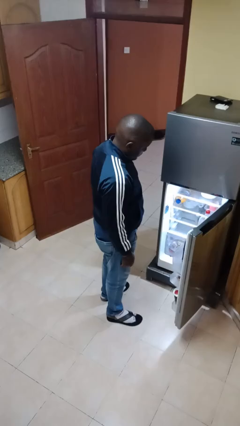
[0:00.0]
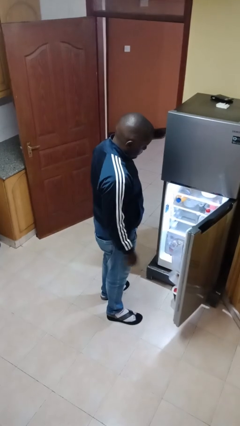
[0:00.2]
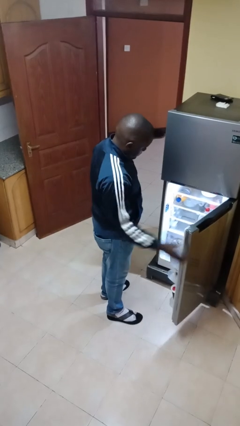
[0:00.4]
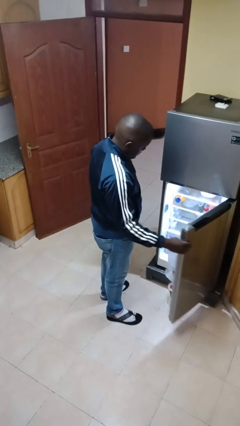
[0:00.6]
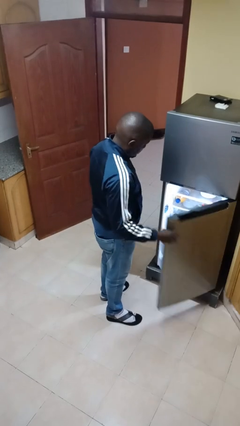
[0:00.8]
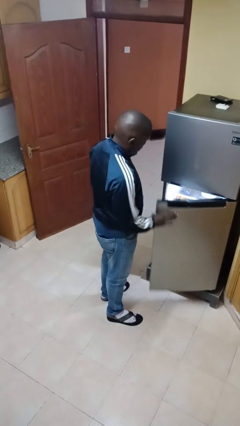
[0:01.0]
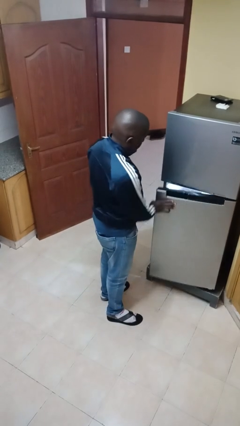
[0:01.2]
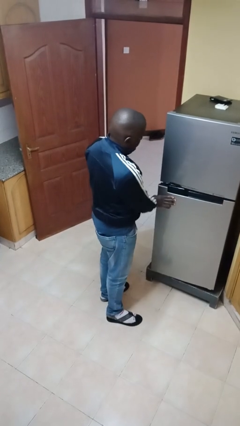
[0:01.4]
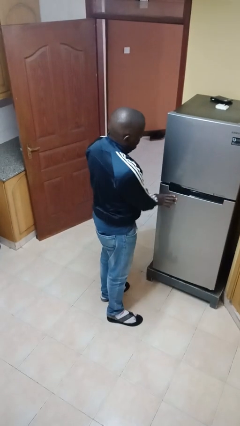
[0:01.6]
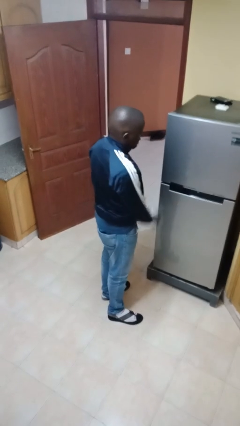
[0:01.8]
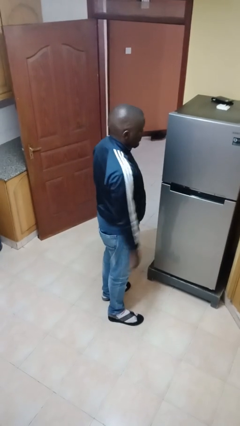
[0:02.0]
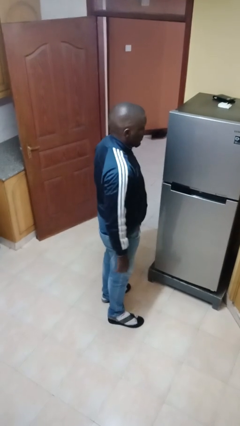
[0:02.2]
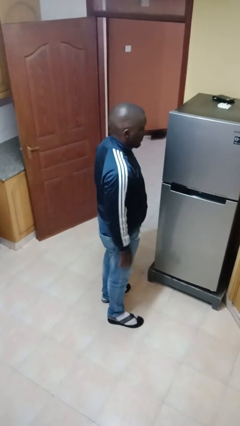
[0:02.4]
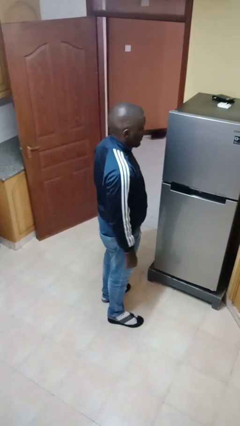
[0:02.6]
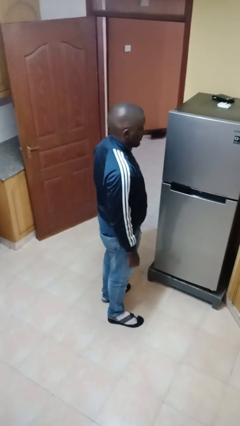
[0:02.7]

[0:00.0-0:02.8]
person closes refrigerator

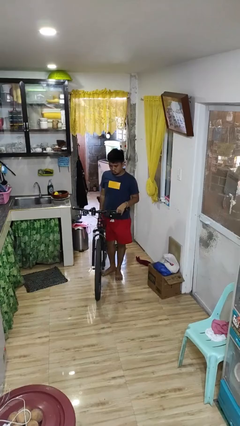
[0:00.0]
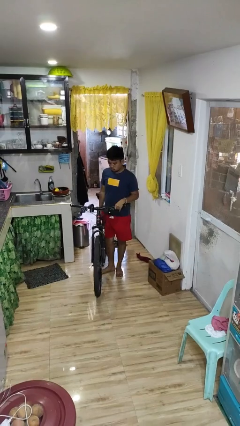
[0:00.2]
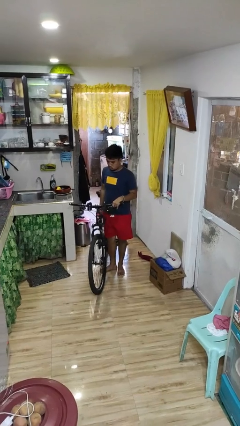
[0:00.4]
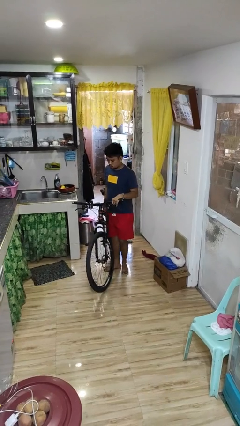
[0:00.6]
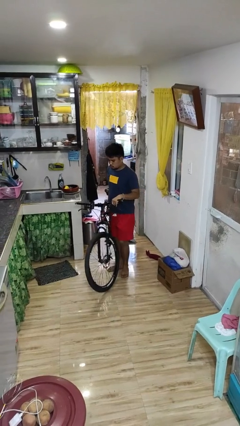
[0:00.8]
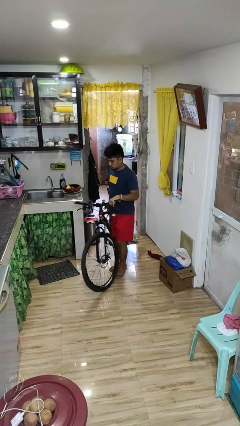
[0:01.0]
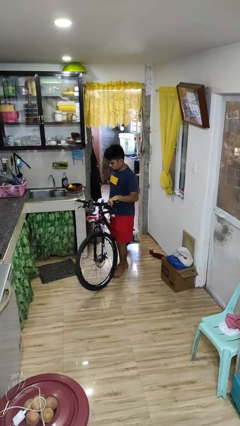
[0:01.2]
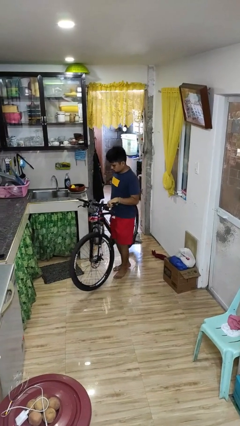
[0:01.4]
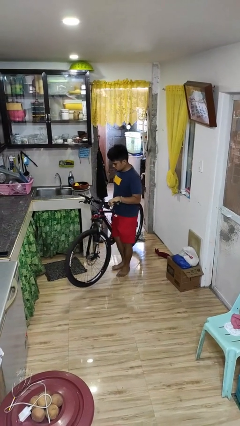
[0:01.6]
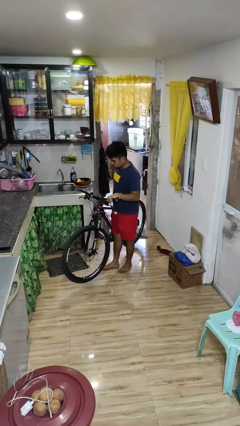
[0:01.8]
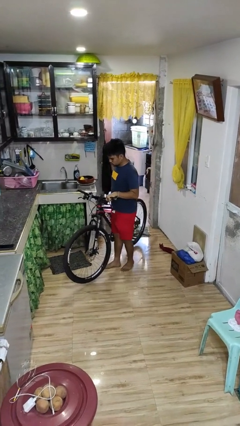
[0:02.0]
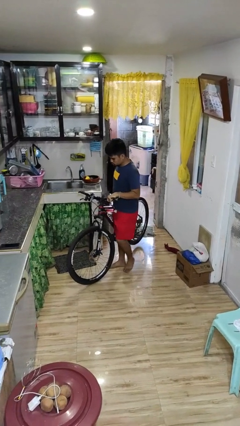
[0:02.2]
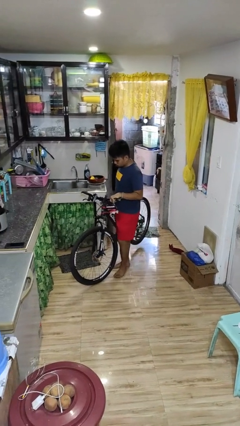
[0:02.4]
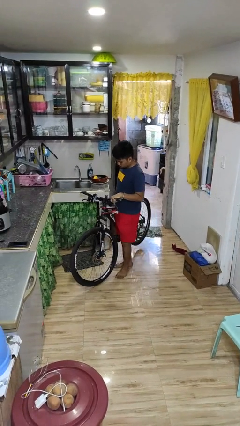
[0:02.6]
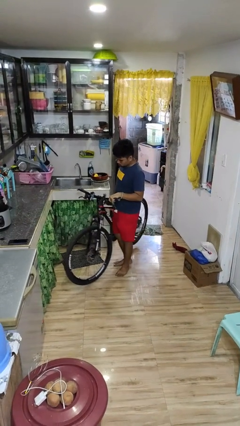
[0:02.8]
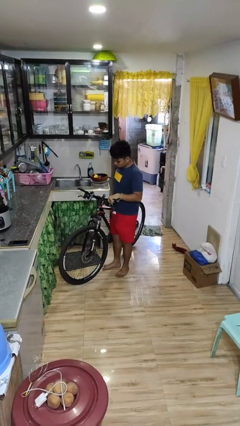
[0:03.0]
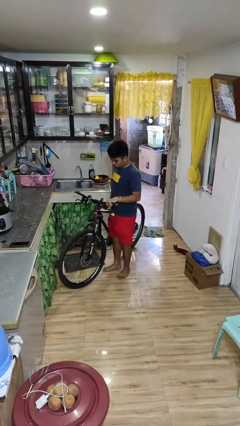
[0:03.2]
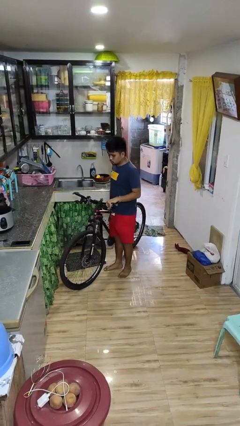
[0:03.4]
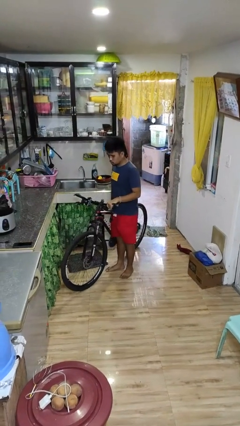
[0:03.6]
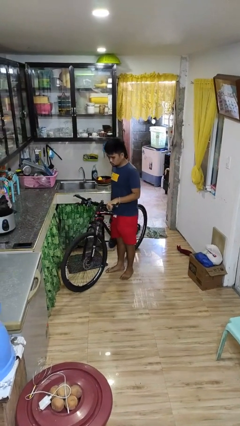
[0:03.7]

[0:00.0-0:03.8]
person carries bicycle

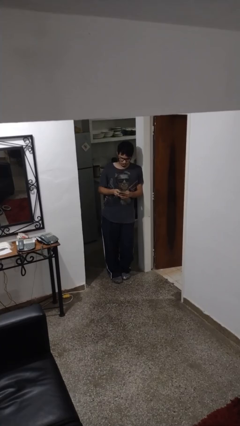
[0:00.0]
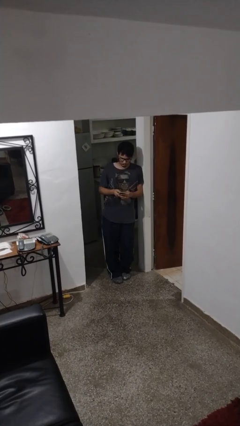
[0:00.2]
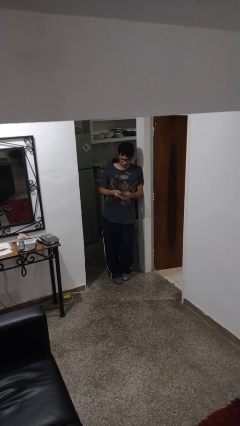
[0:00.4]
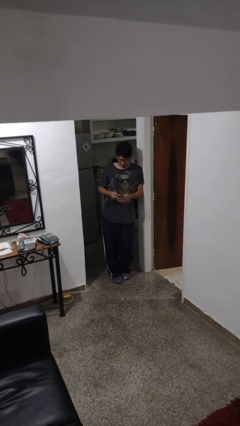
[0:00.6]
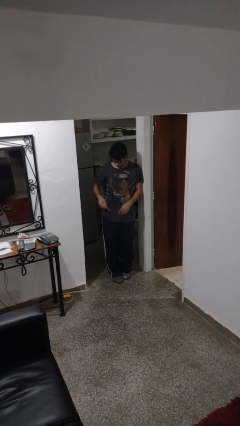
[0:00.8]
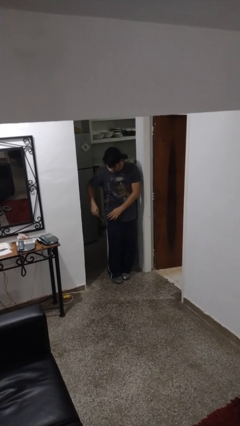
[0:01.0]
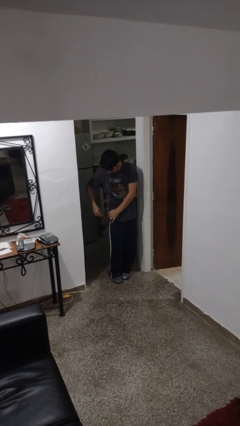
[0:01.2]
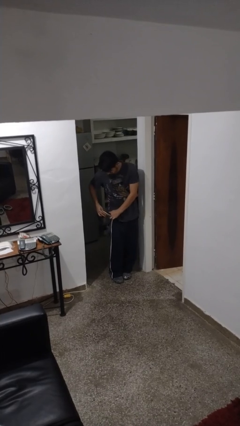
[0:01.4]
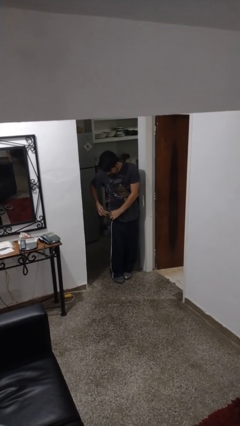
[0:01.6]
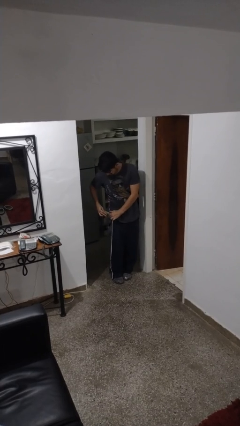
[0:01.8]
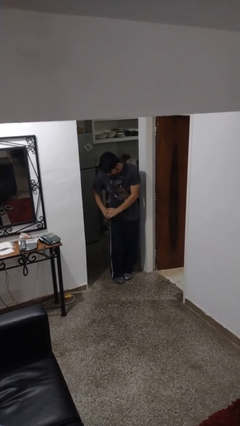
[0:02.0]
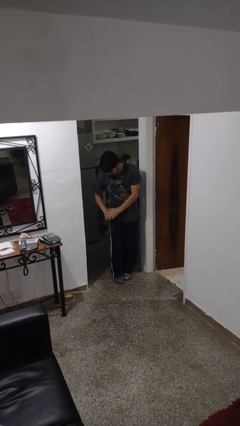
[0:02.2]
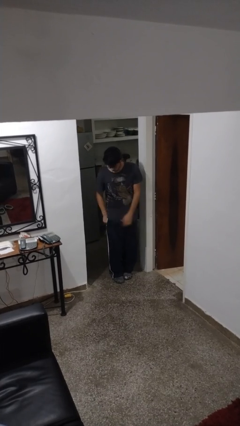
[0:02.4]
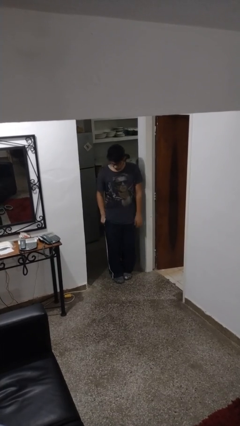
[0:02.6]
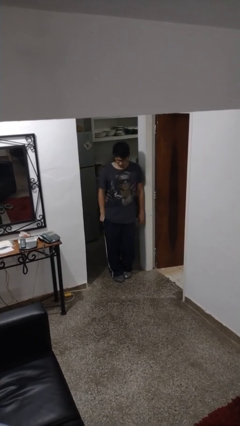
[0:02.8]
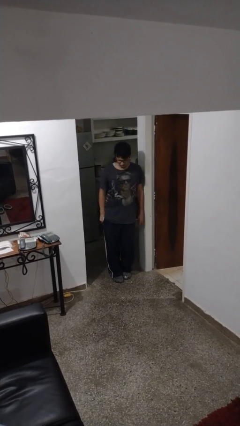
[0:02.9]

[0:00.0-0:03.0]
person puts phone into pocket

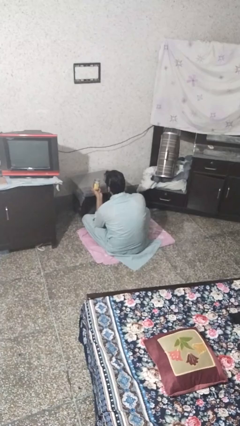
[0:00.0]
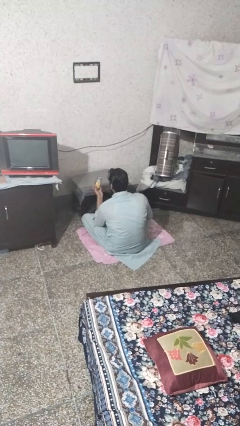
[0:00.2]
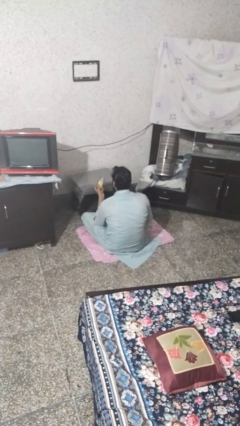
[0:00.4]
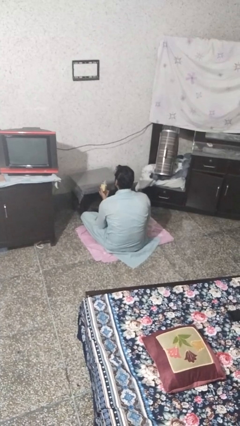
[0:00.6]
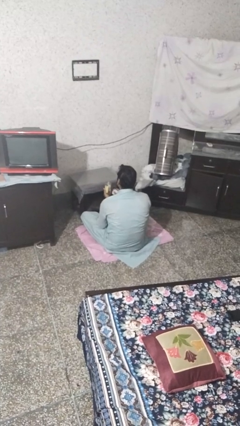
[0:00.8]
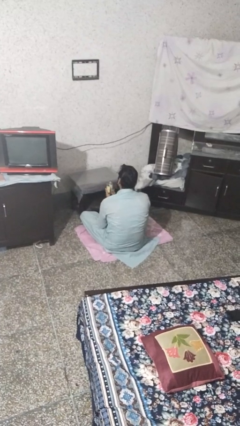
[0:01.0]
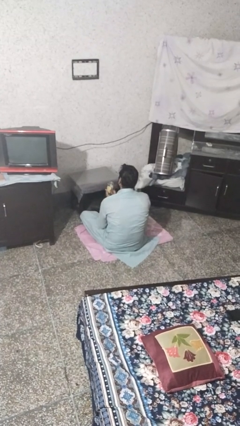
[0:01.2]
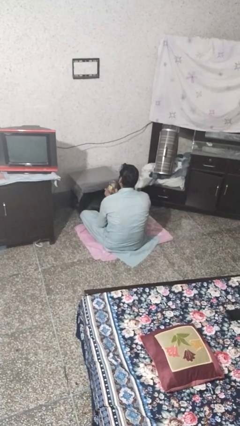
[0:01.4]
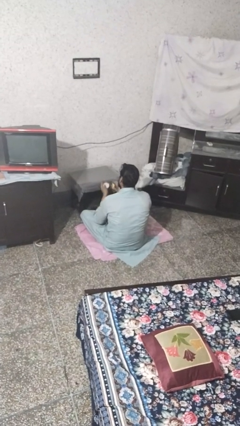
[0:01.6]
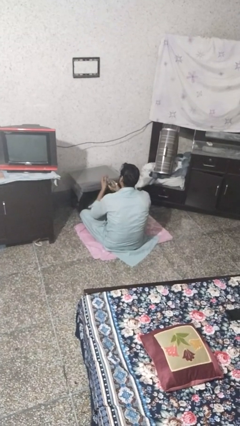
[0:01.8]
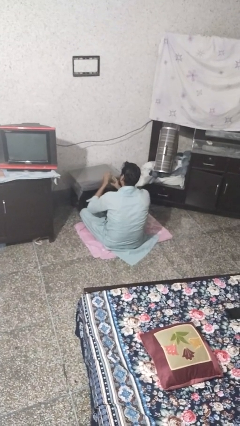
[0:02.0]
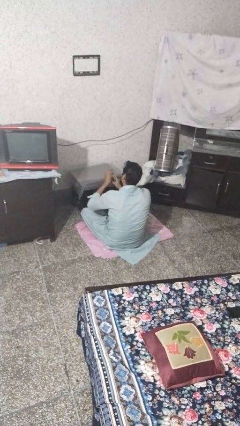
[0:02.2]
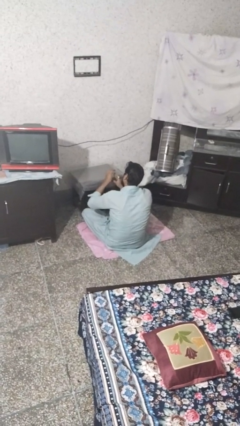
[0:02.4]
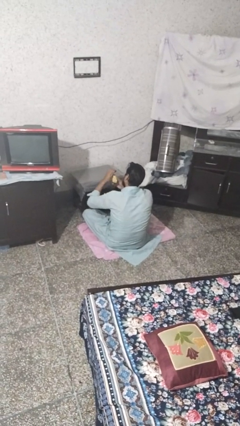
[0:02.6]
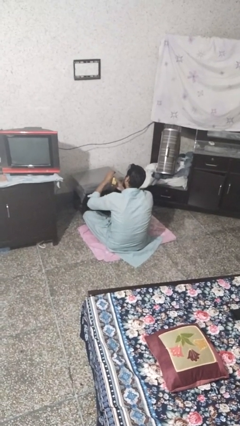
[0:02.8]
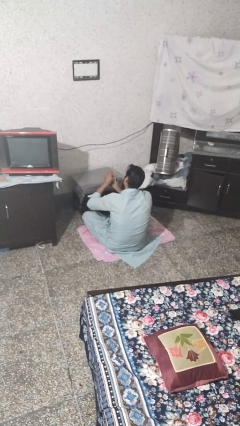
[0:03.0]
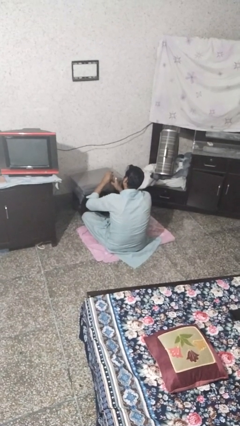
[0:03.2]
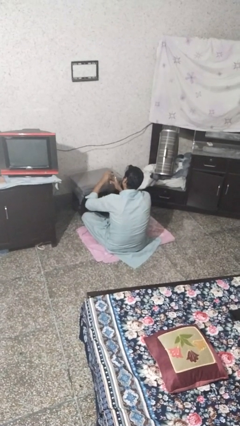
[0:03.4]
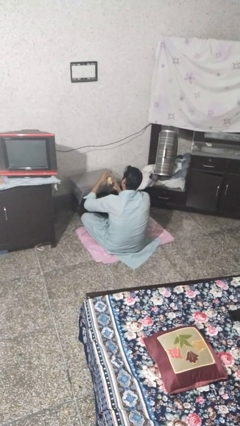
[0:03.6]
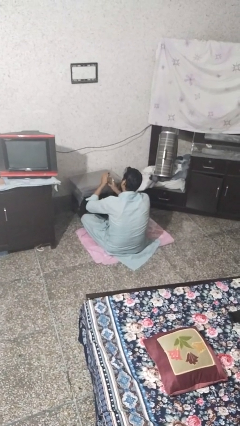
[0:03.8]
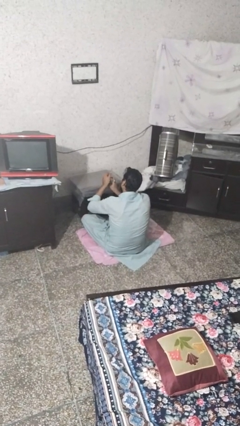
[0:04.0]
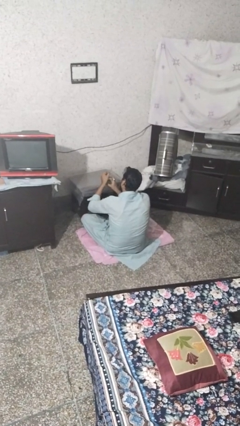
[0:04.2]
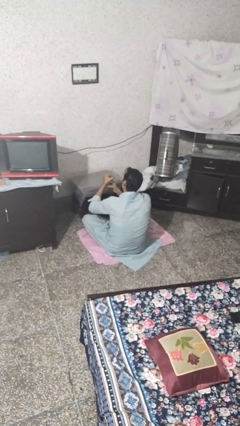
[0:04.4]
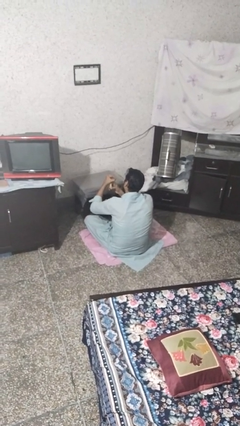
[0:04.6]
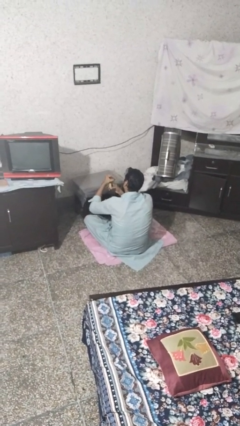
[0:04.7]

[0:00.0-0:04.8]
person closes jar

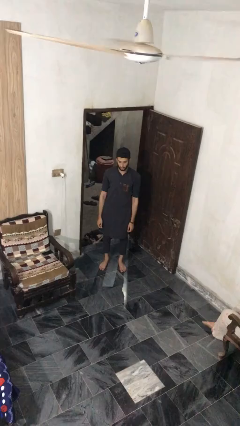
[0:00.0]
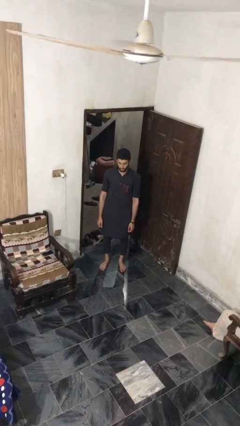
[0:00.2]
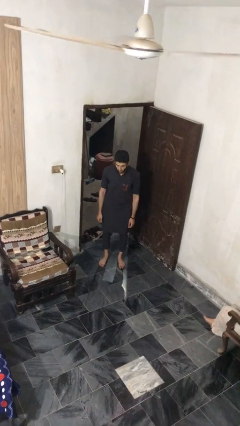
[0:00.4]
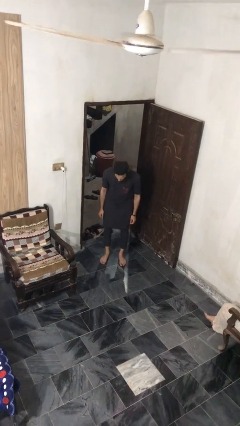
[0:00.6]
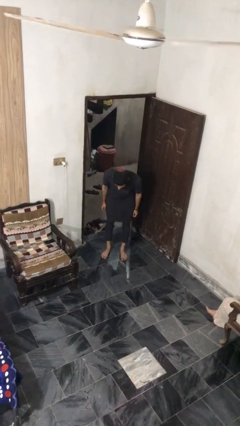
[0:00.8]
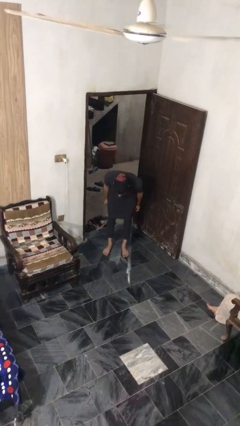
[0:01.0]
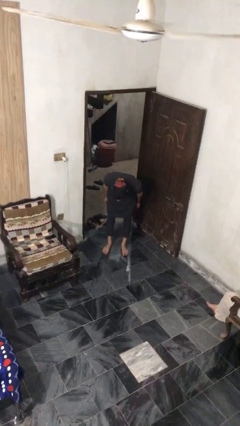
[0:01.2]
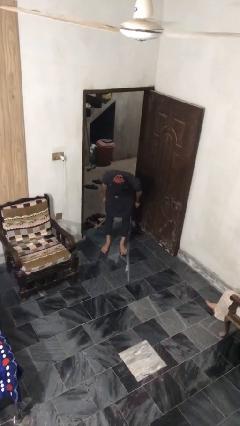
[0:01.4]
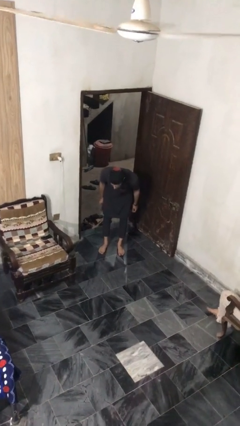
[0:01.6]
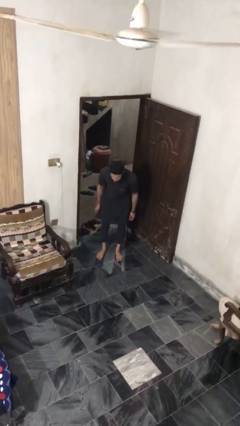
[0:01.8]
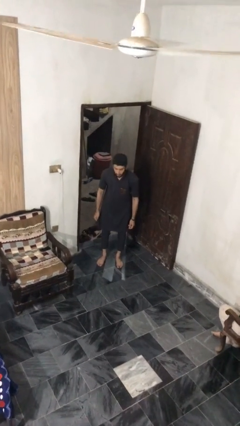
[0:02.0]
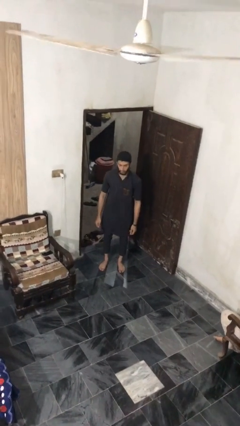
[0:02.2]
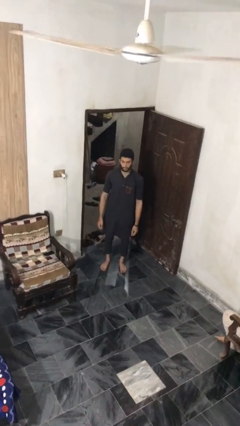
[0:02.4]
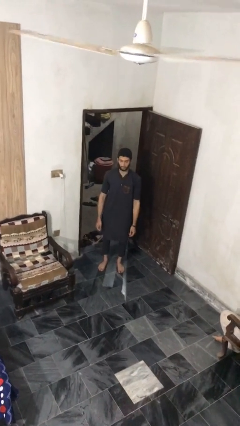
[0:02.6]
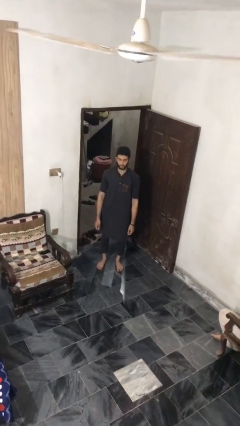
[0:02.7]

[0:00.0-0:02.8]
person bows

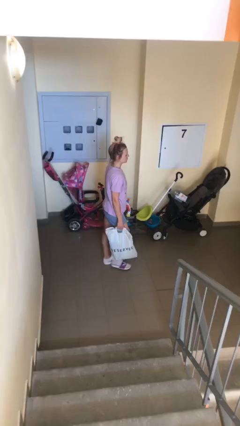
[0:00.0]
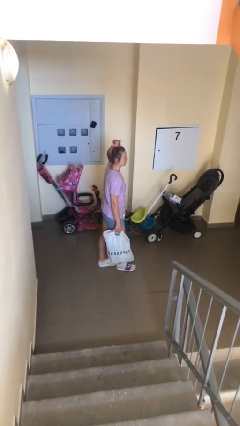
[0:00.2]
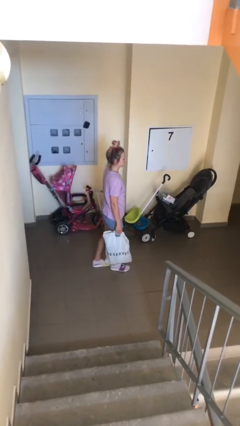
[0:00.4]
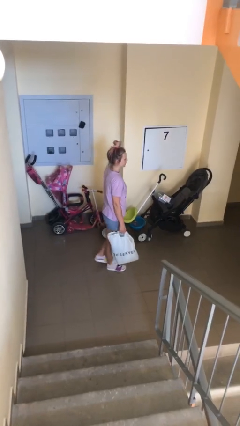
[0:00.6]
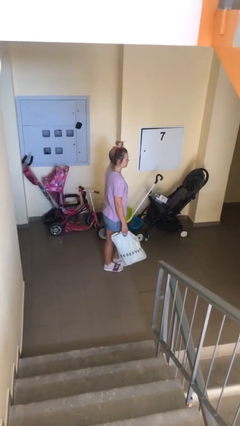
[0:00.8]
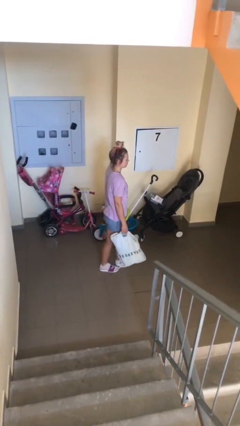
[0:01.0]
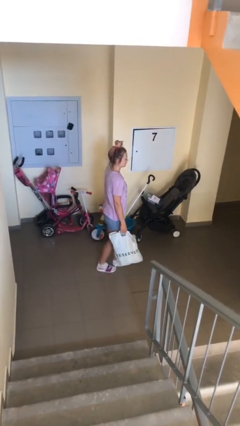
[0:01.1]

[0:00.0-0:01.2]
person carries groceries
